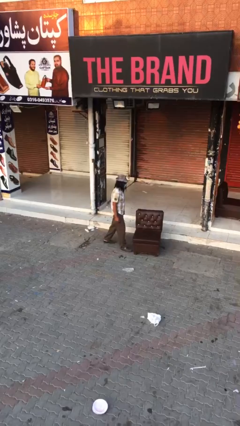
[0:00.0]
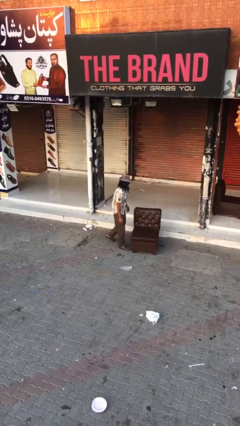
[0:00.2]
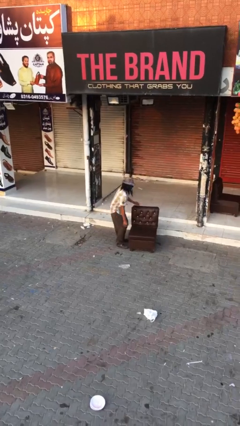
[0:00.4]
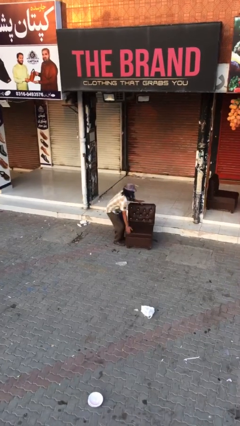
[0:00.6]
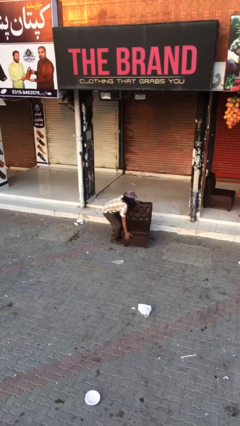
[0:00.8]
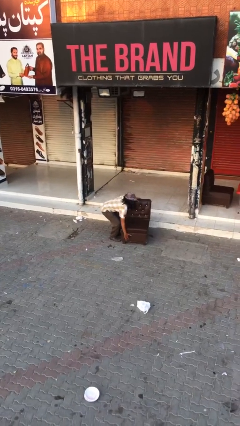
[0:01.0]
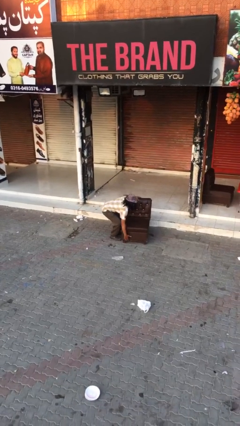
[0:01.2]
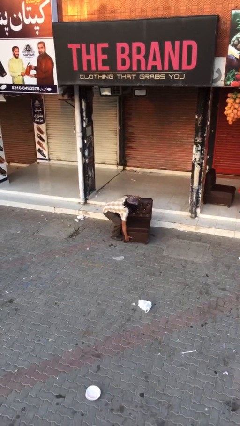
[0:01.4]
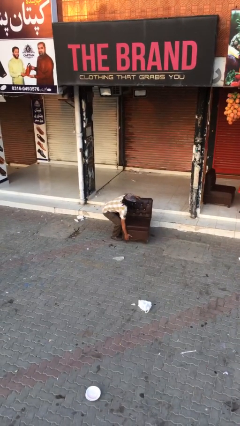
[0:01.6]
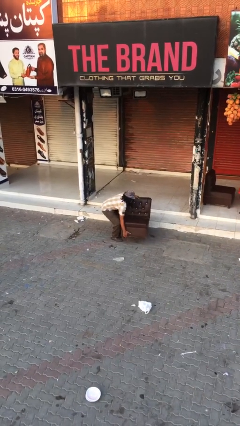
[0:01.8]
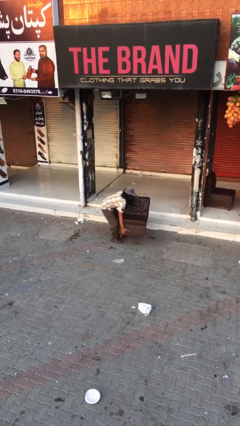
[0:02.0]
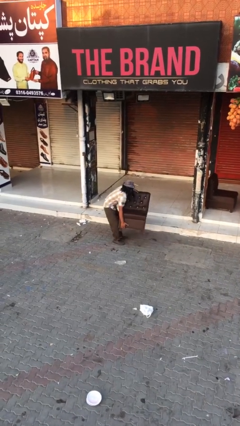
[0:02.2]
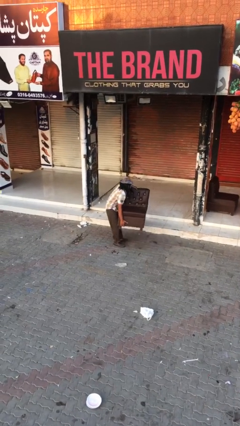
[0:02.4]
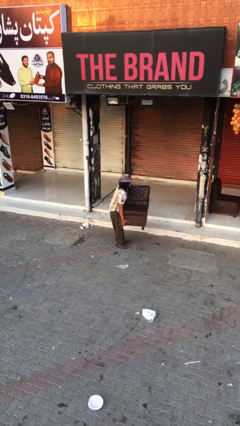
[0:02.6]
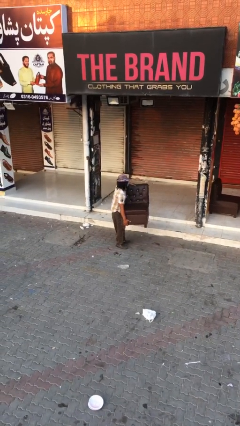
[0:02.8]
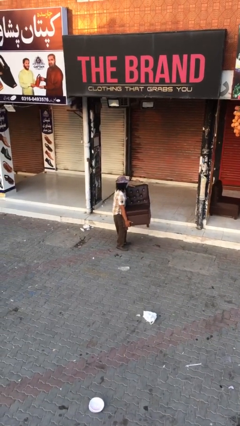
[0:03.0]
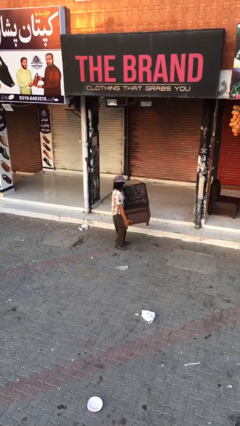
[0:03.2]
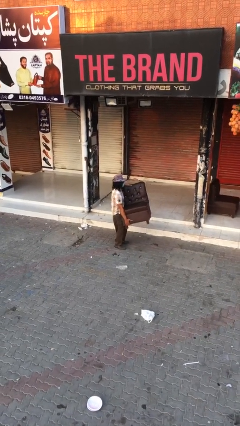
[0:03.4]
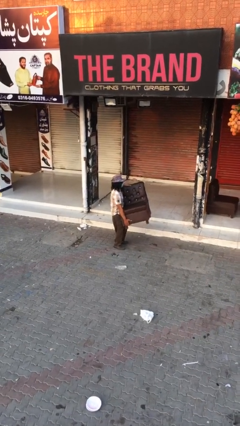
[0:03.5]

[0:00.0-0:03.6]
person picks up object from floor

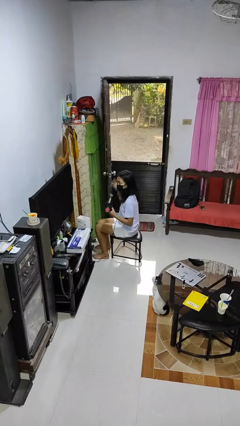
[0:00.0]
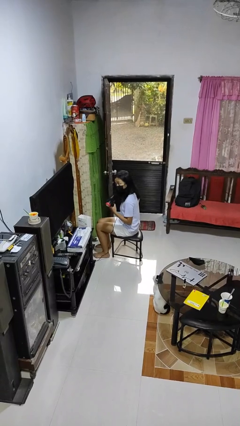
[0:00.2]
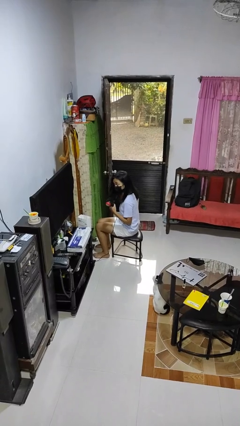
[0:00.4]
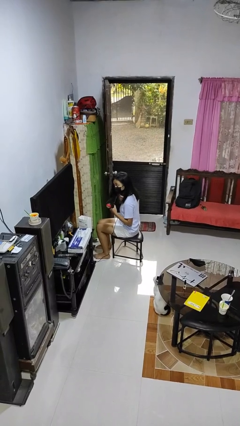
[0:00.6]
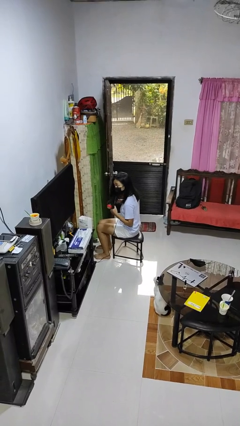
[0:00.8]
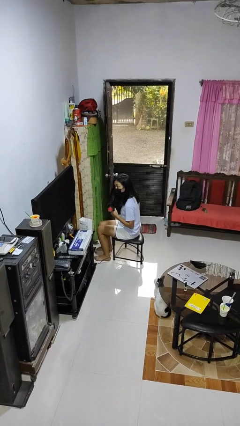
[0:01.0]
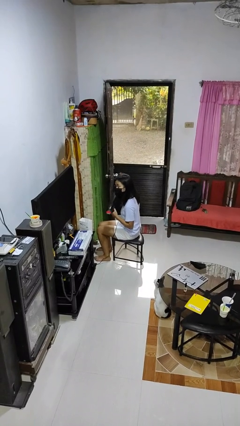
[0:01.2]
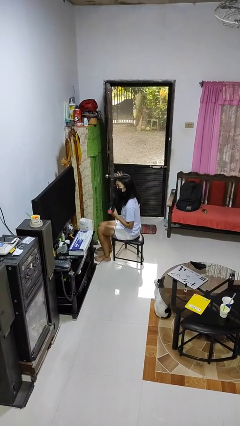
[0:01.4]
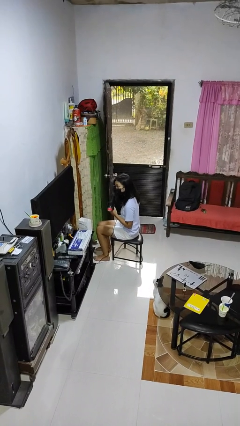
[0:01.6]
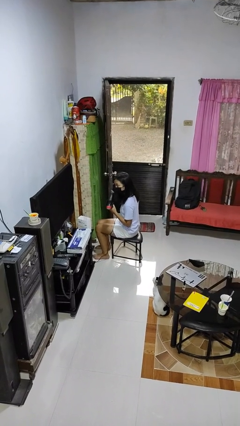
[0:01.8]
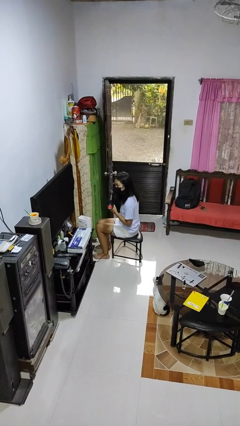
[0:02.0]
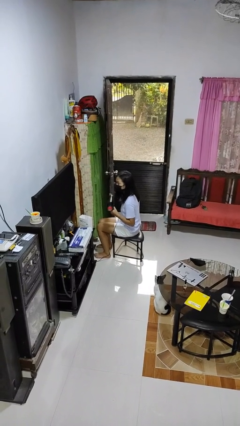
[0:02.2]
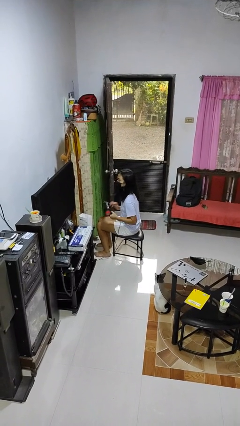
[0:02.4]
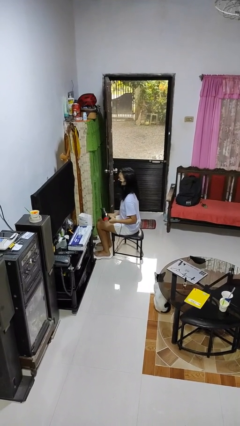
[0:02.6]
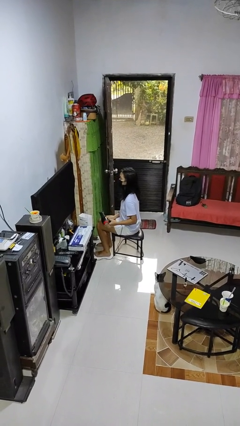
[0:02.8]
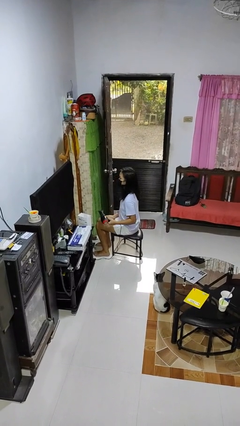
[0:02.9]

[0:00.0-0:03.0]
person dries hair with hairdryer

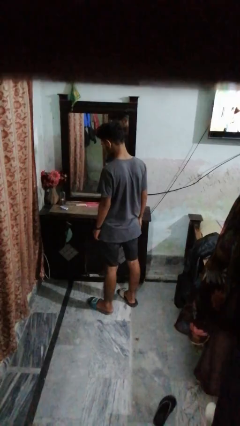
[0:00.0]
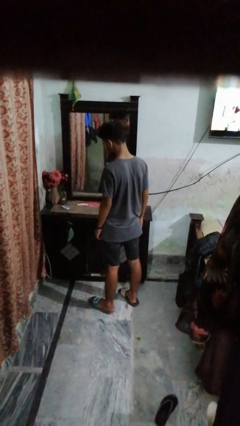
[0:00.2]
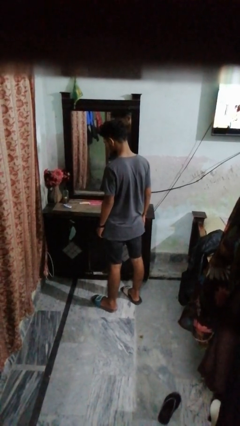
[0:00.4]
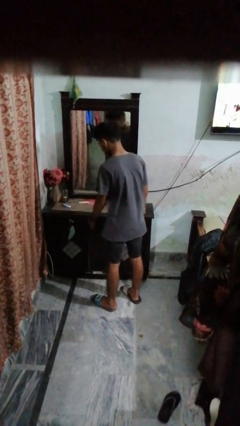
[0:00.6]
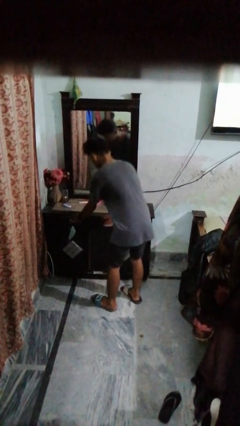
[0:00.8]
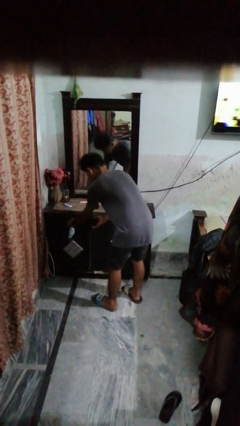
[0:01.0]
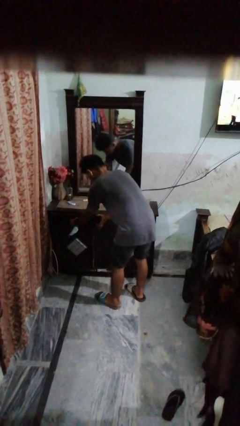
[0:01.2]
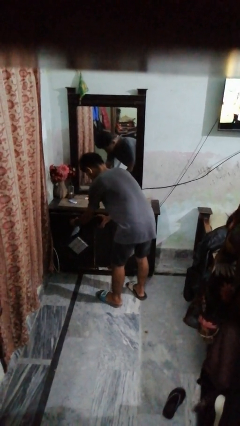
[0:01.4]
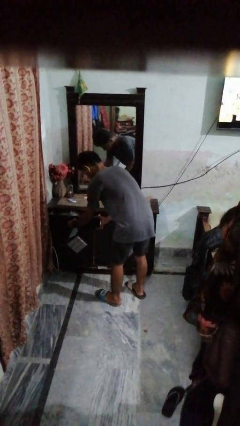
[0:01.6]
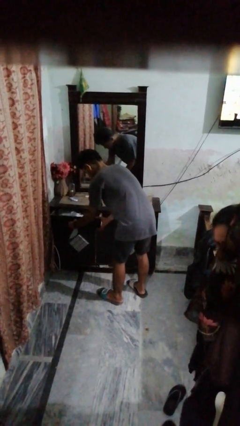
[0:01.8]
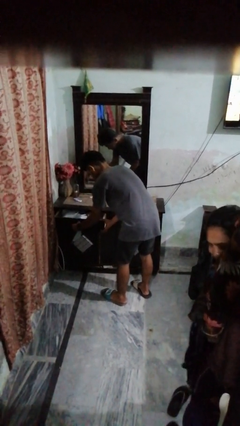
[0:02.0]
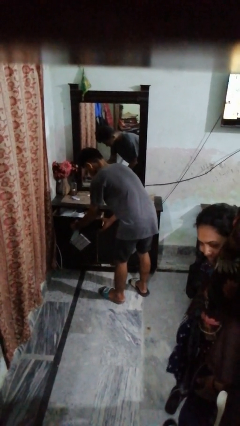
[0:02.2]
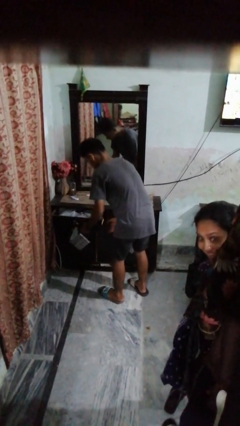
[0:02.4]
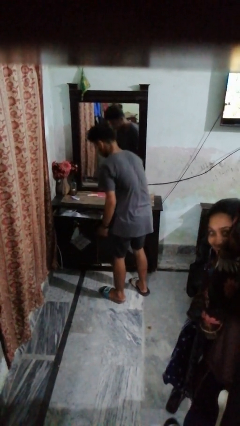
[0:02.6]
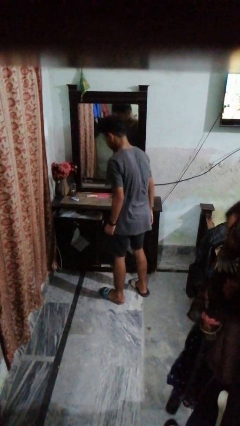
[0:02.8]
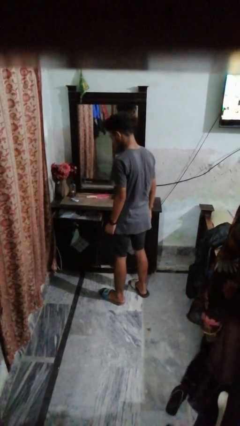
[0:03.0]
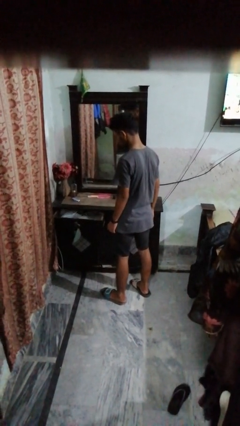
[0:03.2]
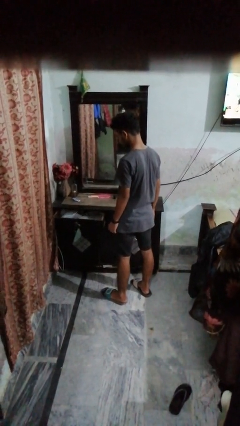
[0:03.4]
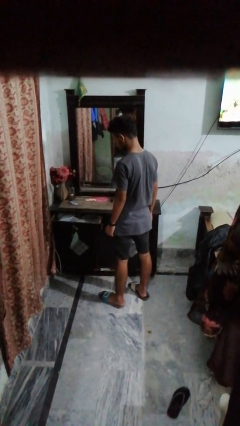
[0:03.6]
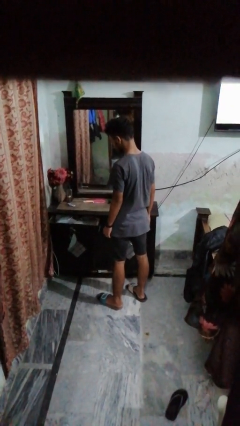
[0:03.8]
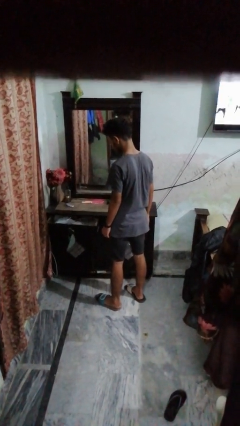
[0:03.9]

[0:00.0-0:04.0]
person opens dresser drawer

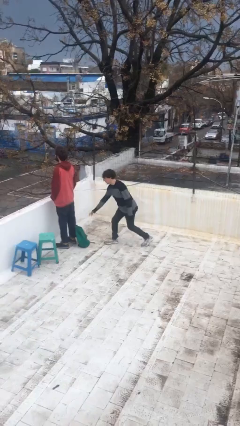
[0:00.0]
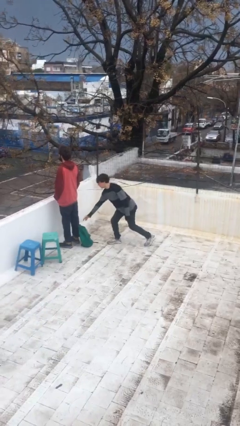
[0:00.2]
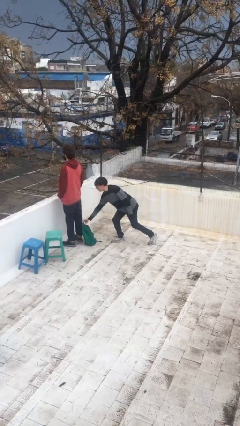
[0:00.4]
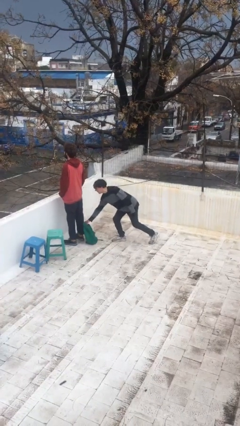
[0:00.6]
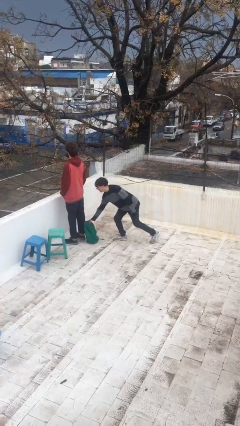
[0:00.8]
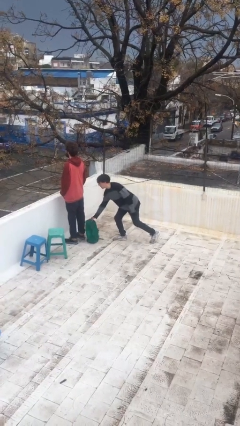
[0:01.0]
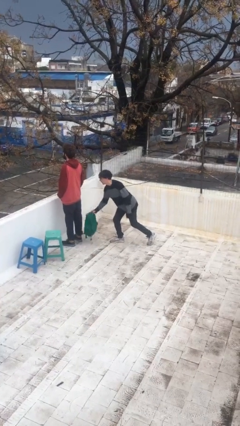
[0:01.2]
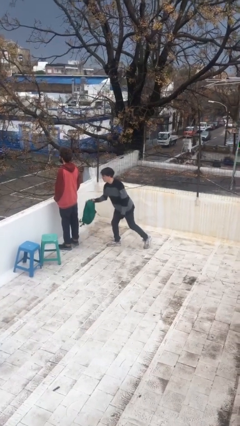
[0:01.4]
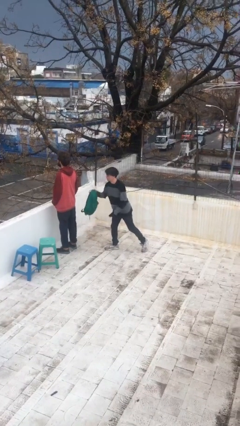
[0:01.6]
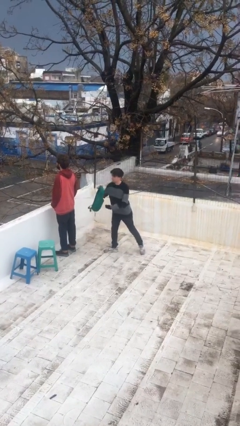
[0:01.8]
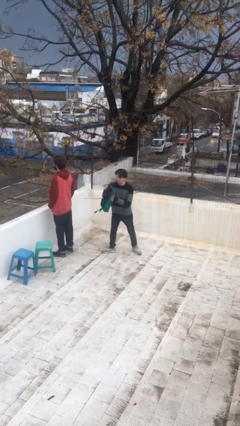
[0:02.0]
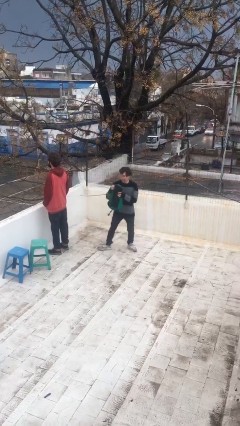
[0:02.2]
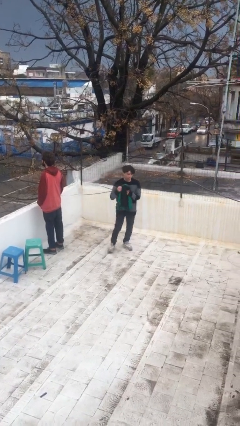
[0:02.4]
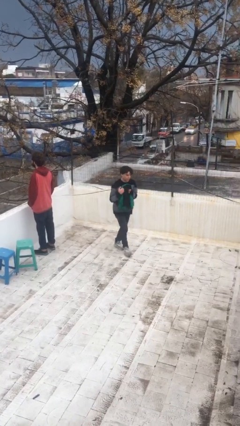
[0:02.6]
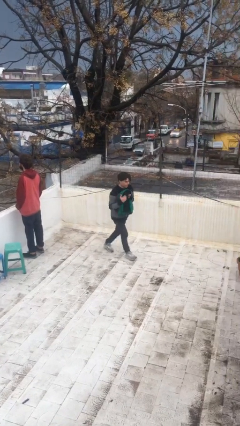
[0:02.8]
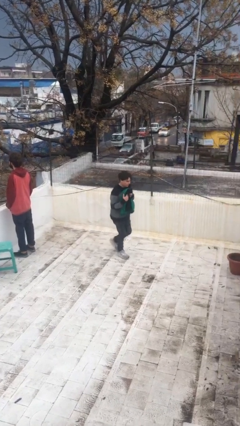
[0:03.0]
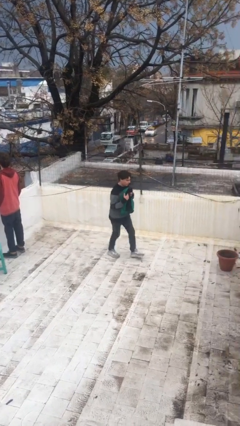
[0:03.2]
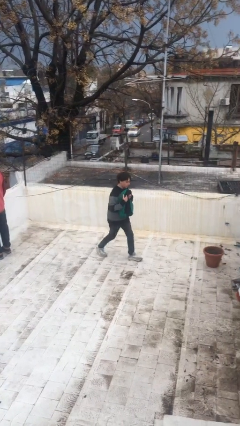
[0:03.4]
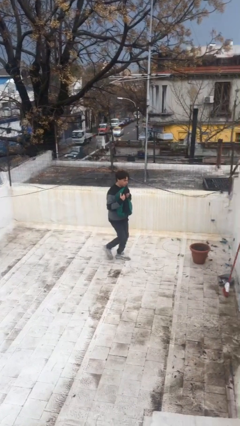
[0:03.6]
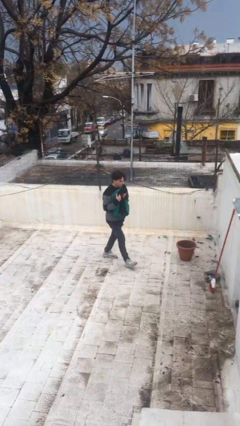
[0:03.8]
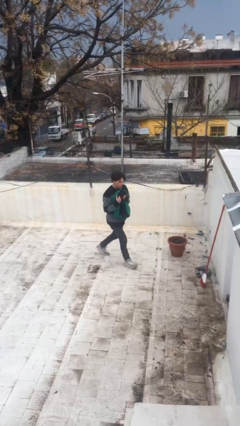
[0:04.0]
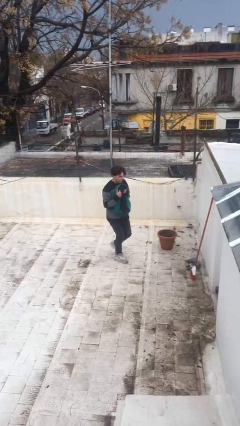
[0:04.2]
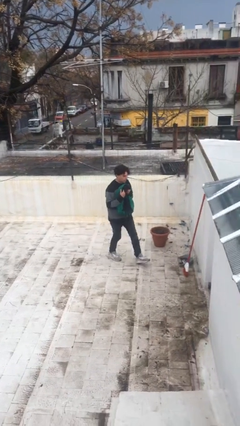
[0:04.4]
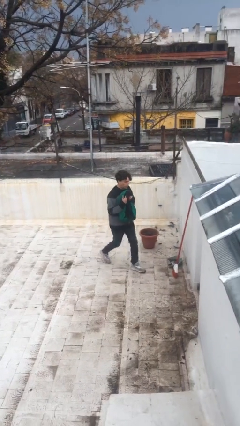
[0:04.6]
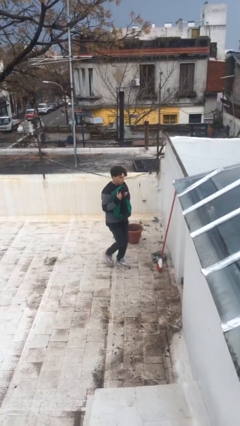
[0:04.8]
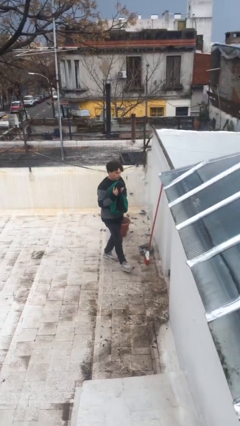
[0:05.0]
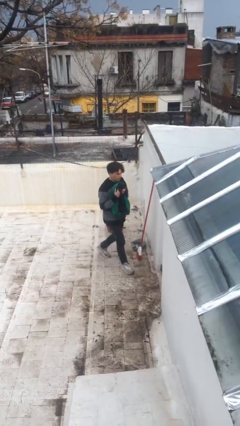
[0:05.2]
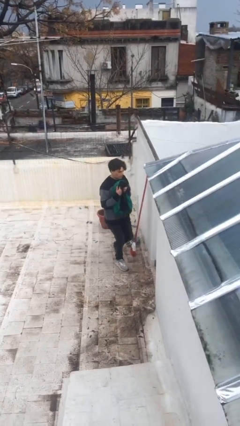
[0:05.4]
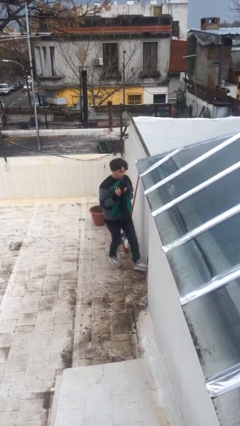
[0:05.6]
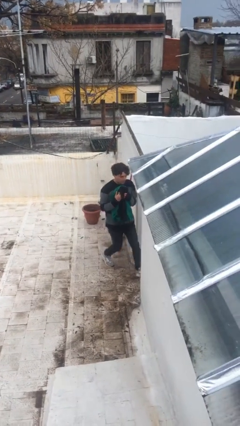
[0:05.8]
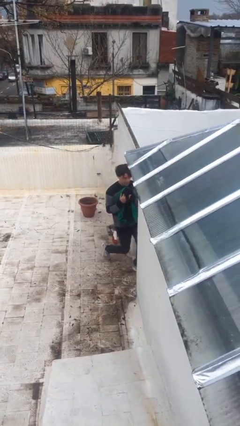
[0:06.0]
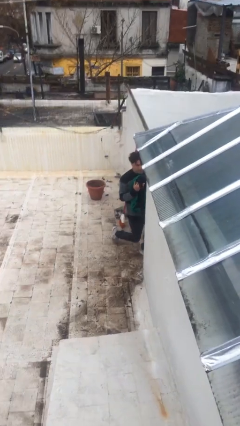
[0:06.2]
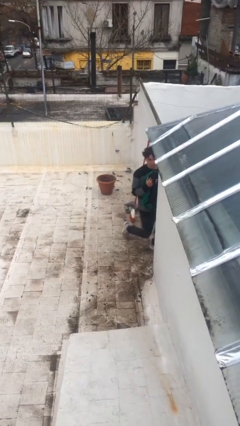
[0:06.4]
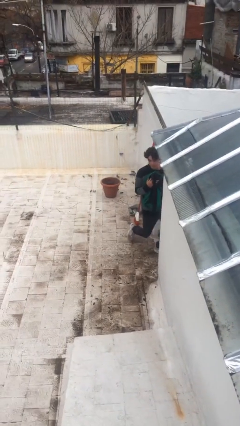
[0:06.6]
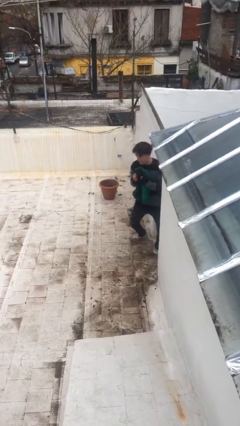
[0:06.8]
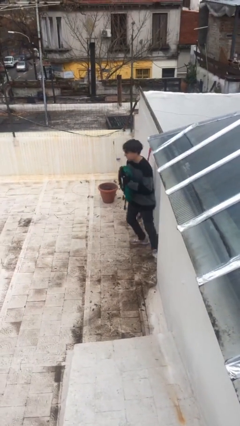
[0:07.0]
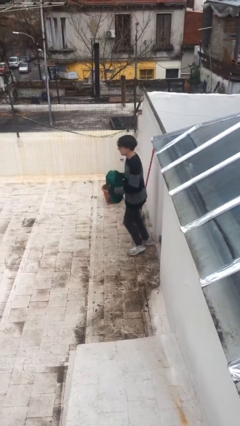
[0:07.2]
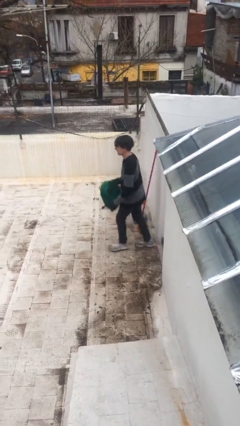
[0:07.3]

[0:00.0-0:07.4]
person steals object from person
